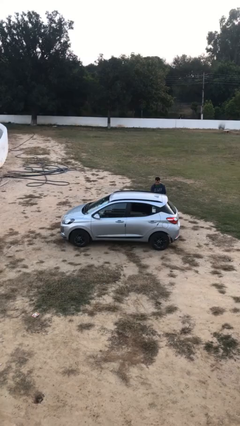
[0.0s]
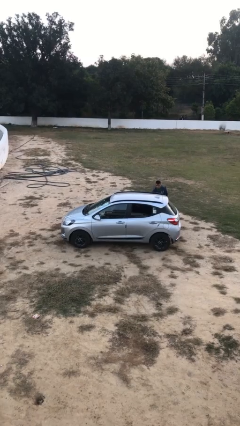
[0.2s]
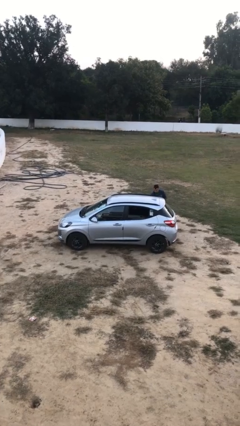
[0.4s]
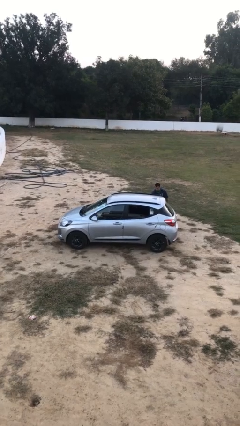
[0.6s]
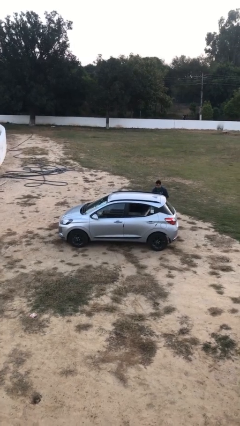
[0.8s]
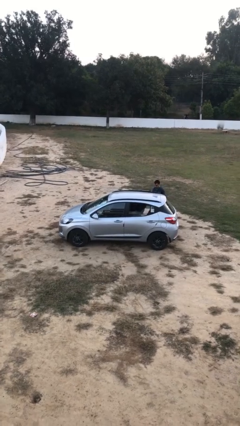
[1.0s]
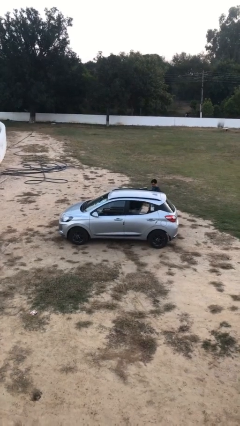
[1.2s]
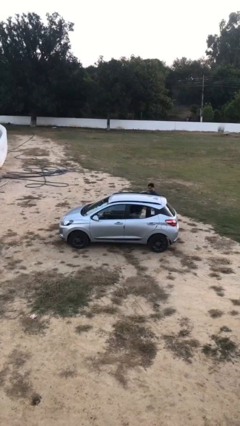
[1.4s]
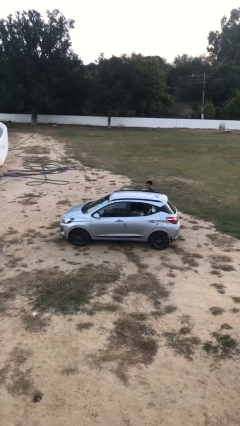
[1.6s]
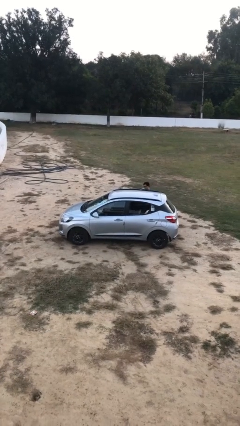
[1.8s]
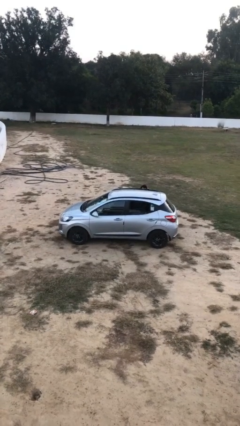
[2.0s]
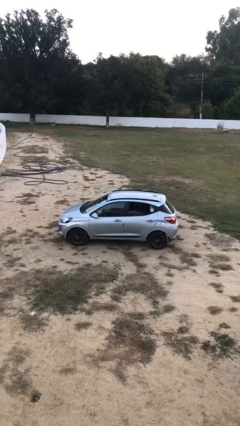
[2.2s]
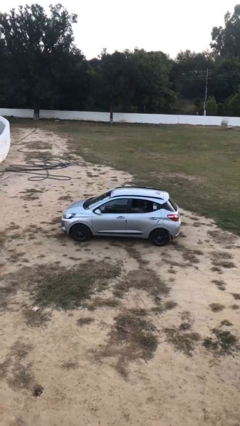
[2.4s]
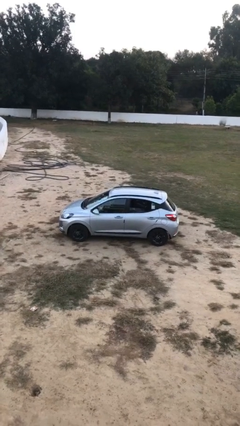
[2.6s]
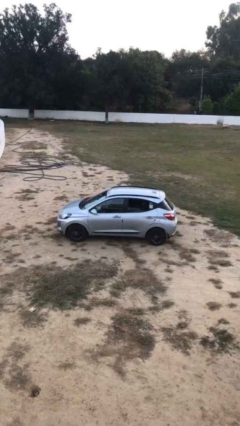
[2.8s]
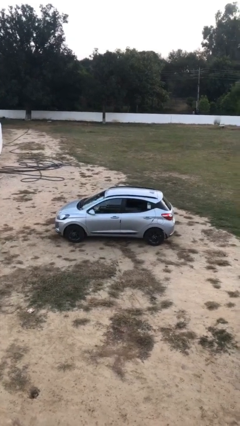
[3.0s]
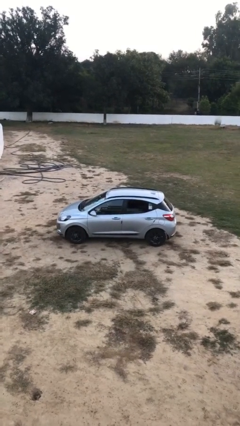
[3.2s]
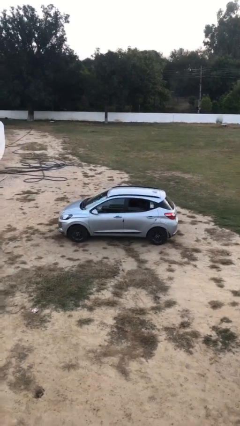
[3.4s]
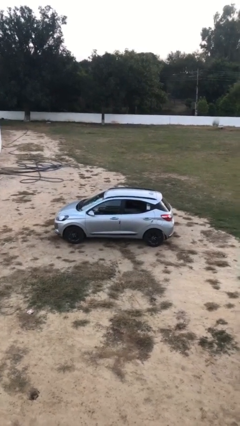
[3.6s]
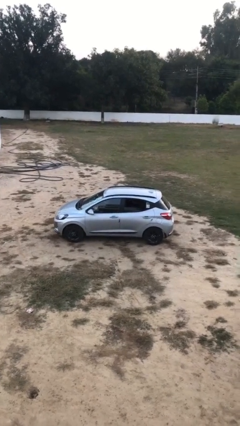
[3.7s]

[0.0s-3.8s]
car picks up person

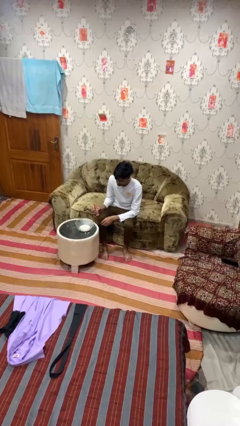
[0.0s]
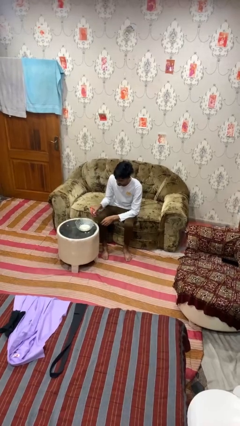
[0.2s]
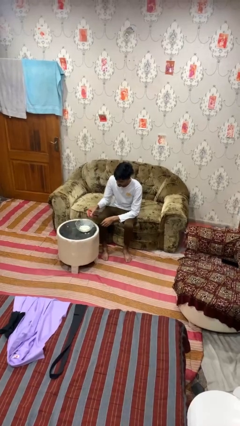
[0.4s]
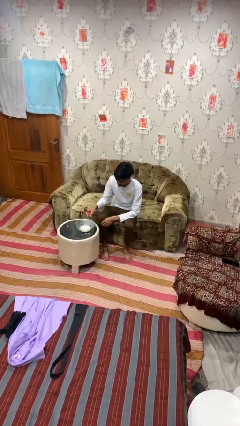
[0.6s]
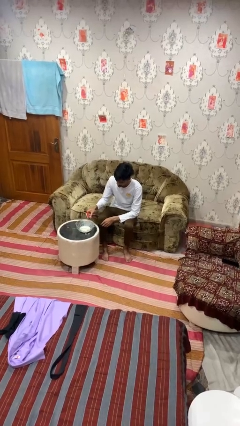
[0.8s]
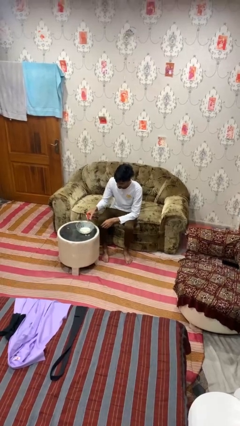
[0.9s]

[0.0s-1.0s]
person pours into bowl

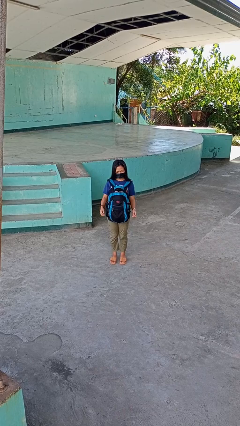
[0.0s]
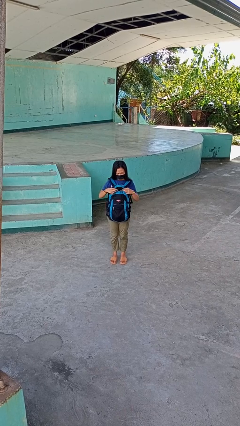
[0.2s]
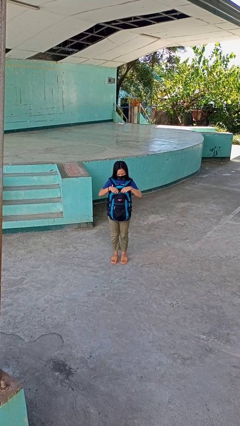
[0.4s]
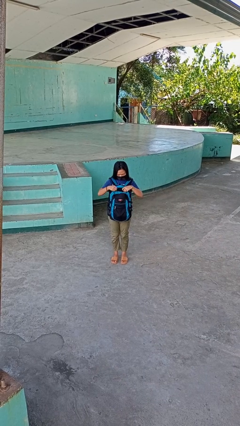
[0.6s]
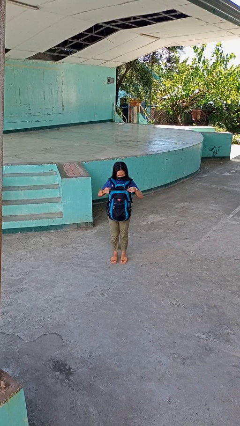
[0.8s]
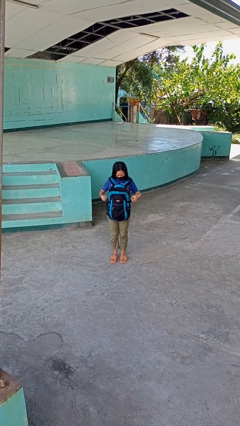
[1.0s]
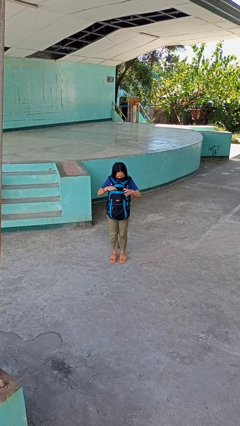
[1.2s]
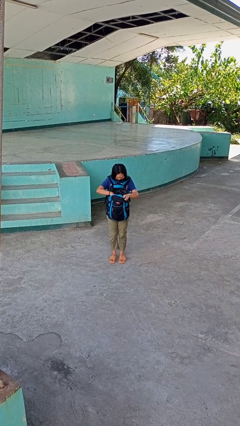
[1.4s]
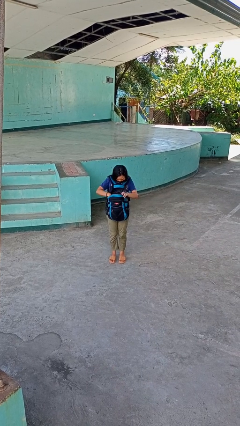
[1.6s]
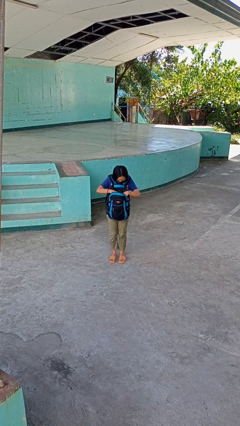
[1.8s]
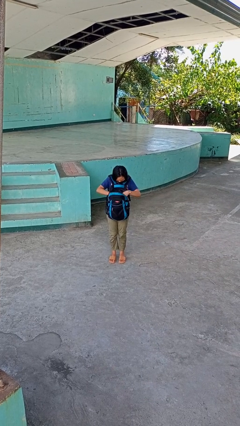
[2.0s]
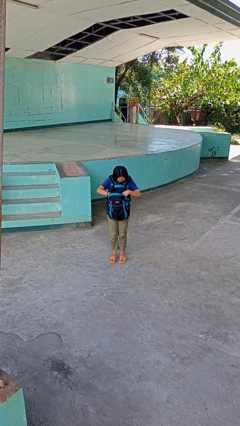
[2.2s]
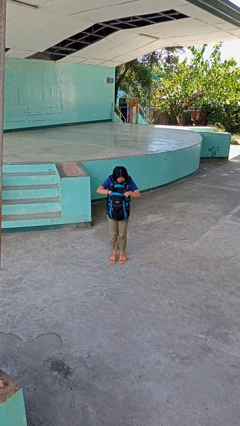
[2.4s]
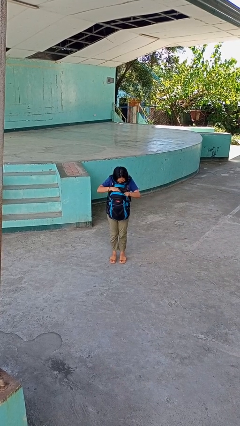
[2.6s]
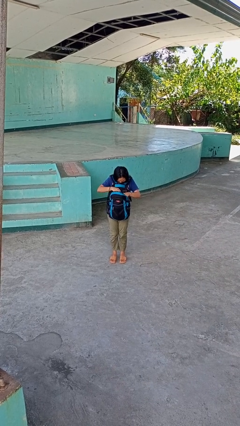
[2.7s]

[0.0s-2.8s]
person searches in backpack

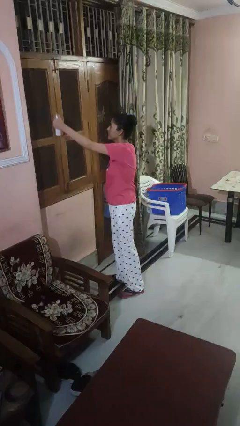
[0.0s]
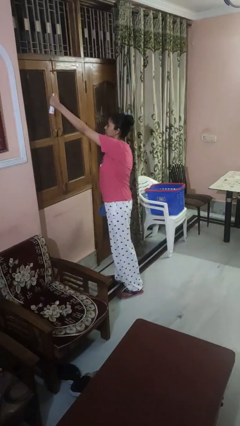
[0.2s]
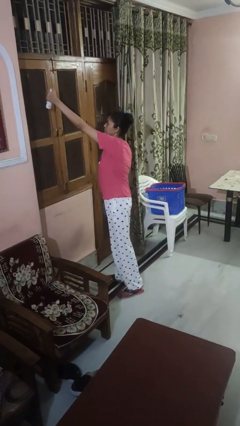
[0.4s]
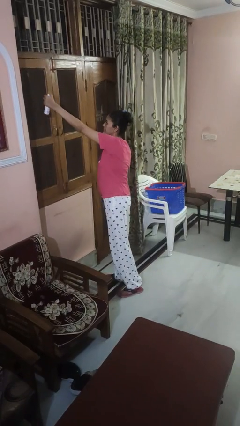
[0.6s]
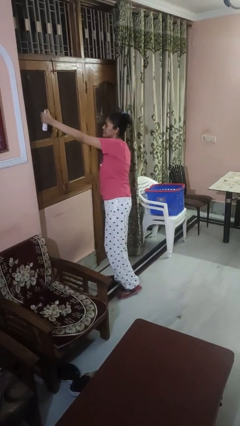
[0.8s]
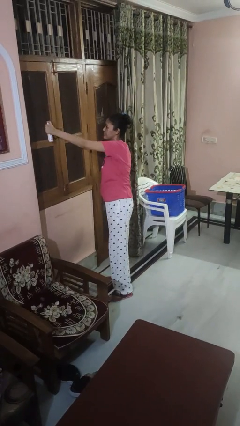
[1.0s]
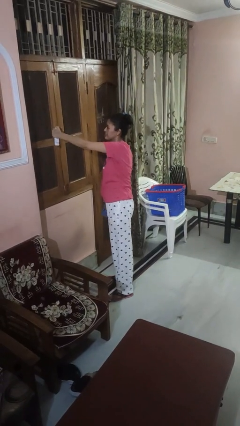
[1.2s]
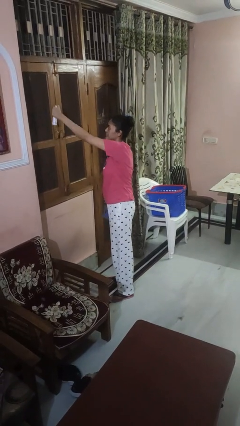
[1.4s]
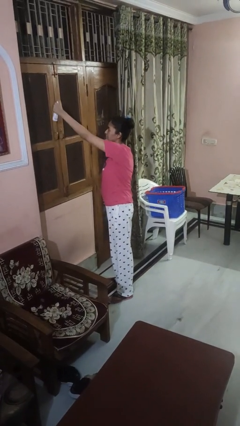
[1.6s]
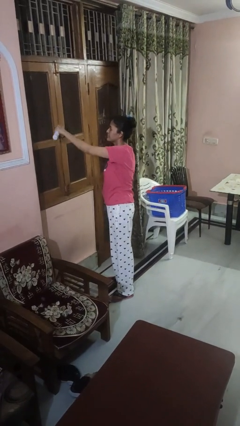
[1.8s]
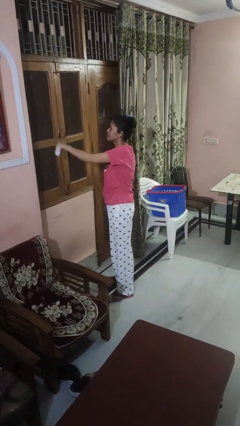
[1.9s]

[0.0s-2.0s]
person sprays from bottle

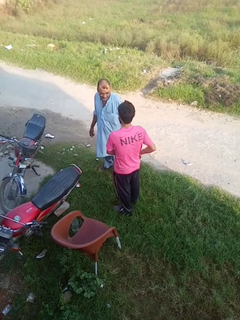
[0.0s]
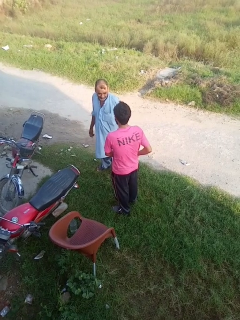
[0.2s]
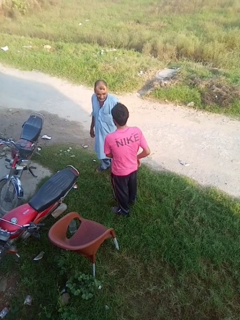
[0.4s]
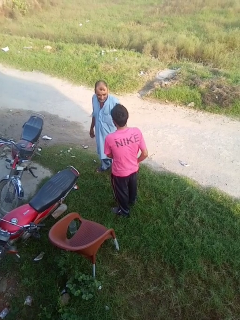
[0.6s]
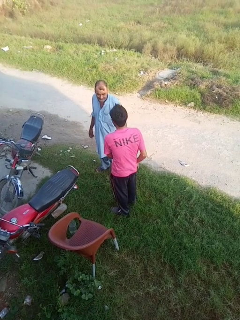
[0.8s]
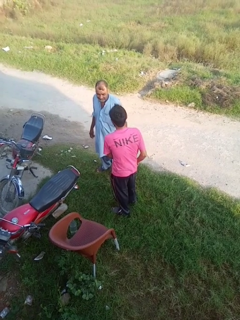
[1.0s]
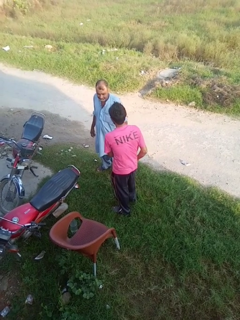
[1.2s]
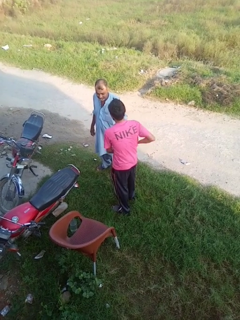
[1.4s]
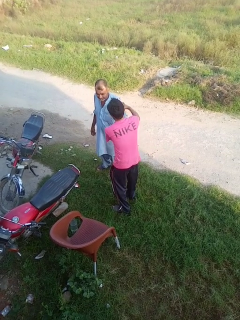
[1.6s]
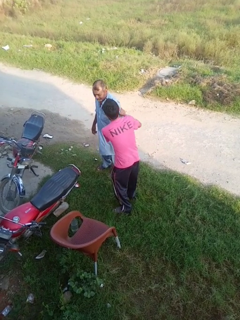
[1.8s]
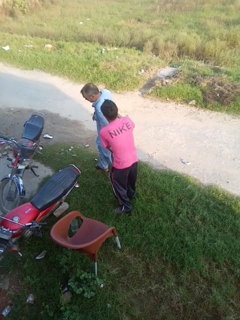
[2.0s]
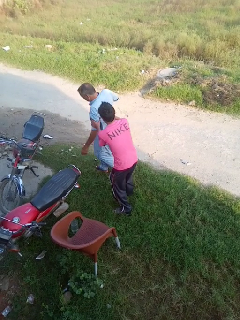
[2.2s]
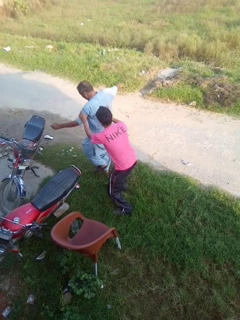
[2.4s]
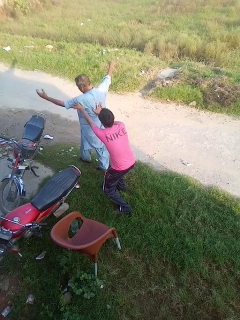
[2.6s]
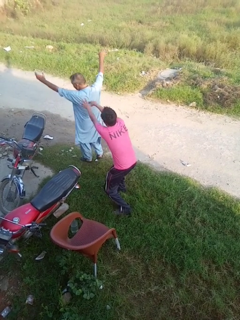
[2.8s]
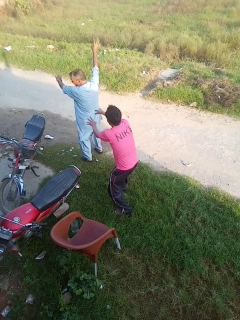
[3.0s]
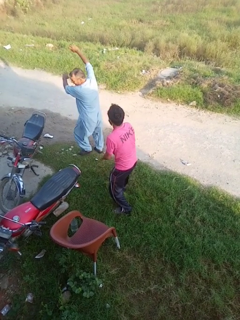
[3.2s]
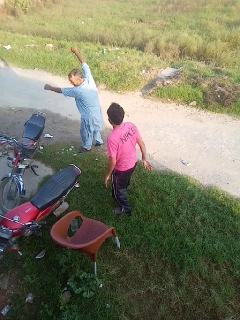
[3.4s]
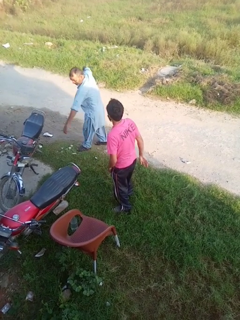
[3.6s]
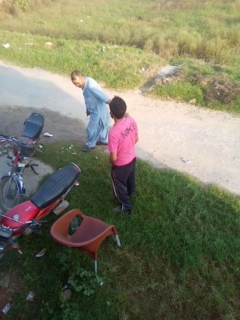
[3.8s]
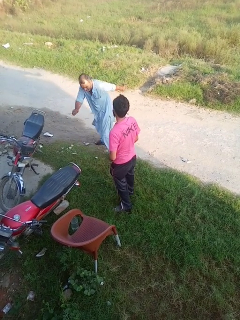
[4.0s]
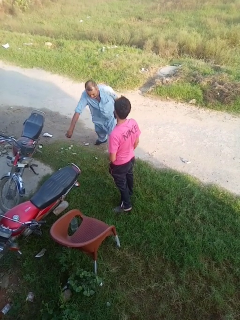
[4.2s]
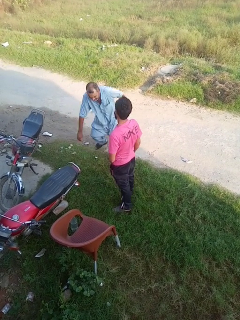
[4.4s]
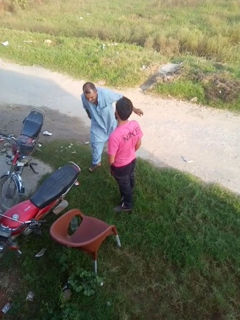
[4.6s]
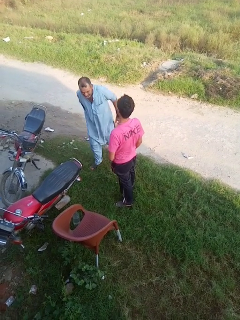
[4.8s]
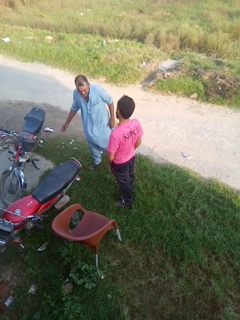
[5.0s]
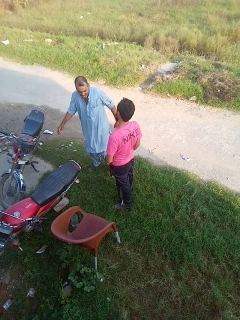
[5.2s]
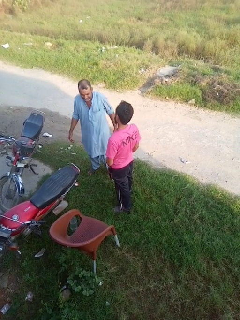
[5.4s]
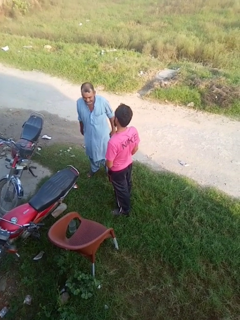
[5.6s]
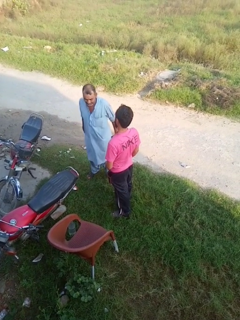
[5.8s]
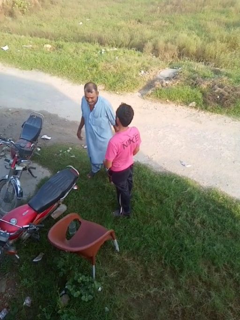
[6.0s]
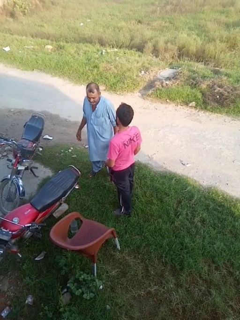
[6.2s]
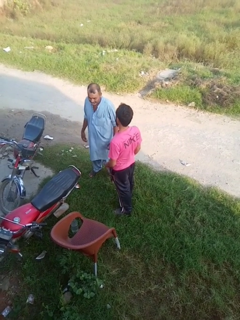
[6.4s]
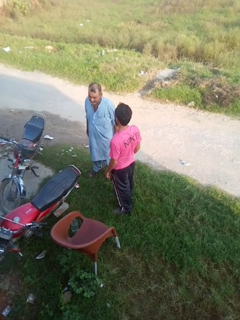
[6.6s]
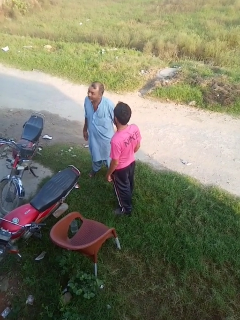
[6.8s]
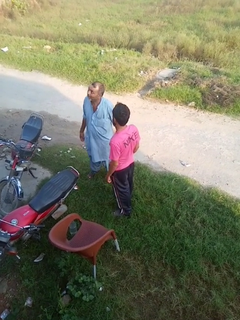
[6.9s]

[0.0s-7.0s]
person shoves person

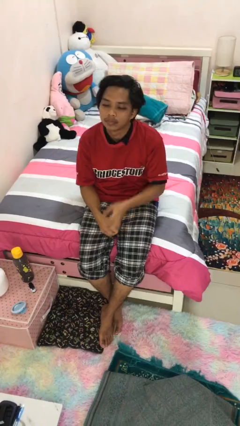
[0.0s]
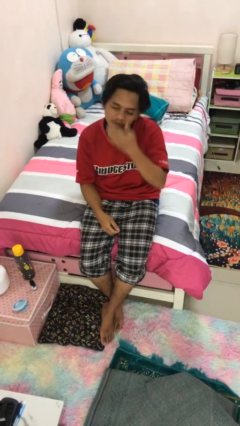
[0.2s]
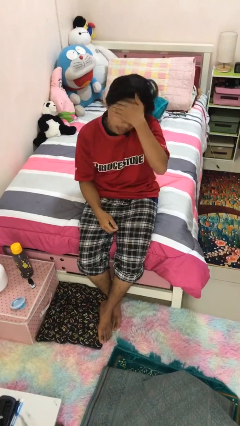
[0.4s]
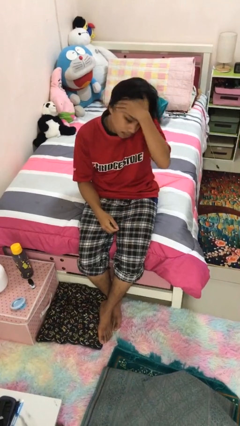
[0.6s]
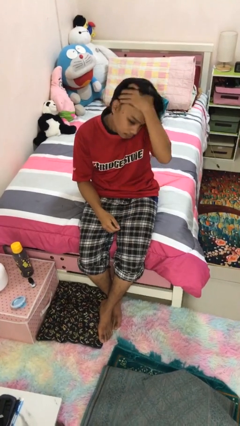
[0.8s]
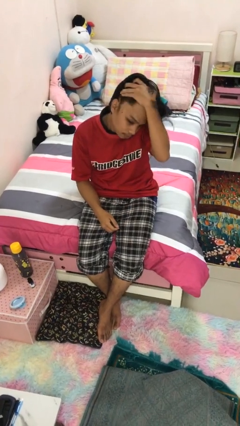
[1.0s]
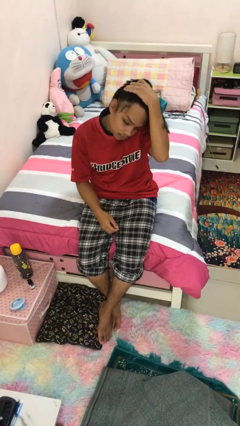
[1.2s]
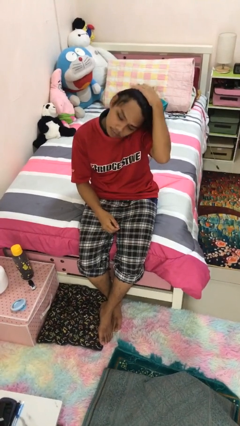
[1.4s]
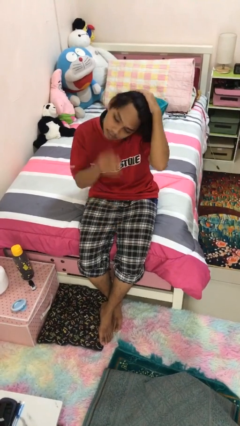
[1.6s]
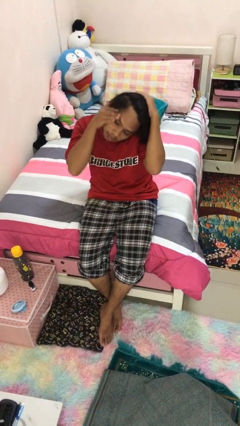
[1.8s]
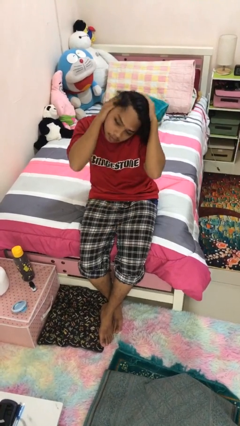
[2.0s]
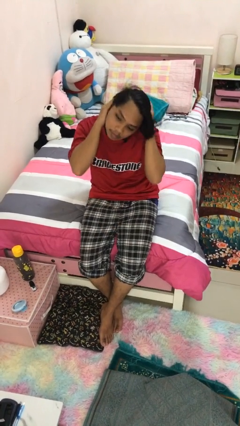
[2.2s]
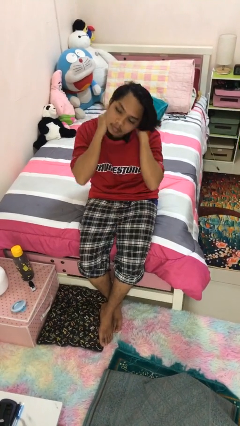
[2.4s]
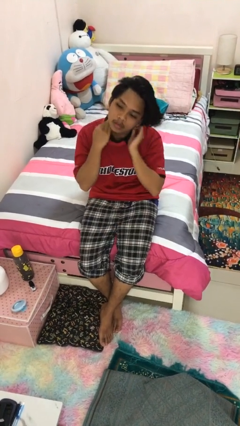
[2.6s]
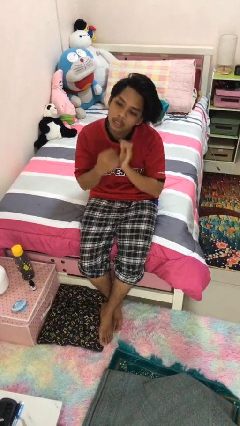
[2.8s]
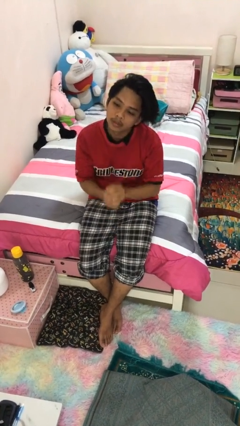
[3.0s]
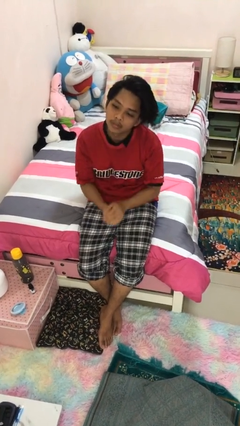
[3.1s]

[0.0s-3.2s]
person strokes hair
